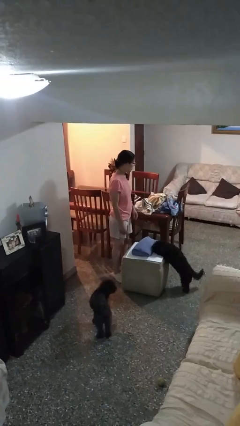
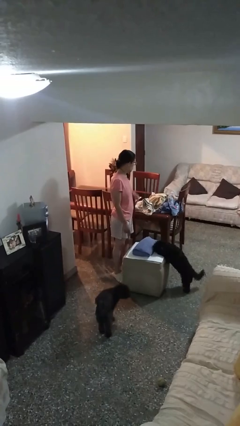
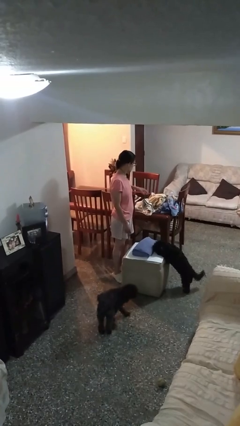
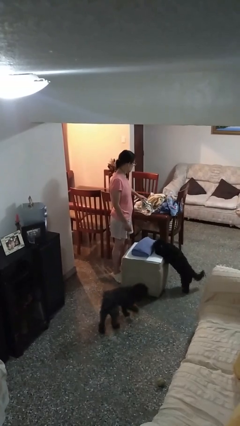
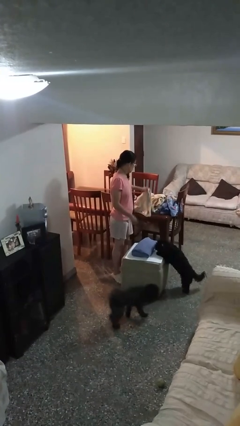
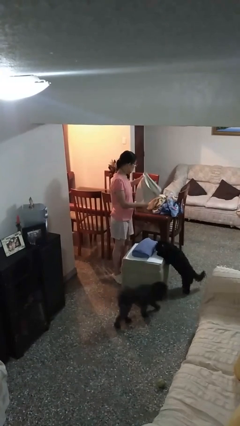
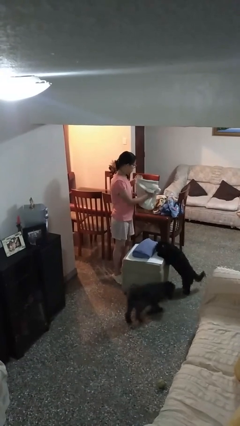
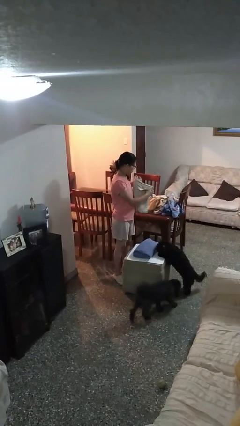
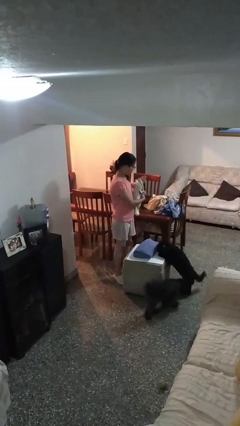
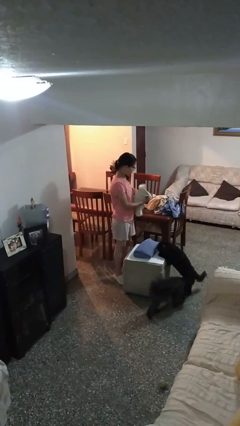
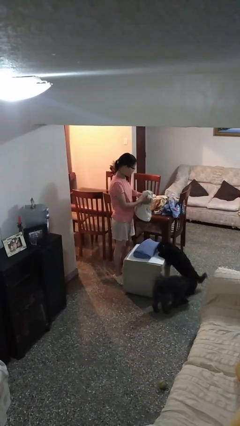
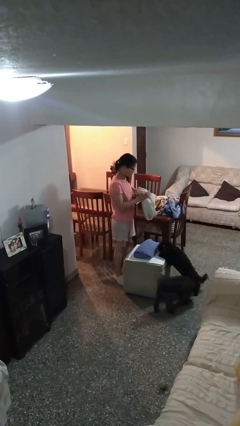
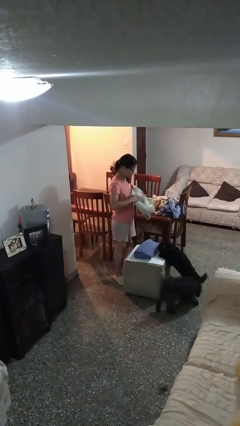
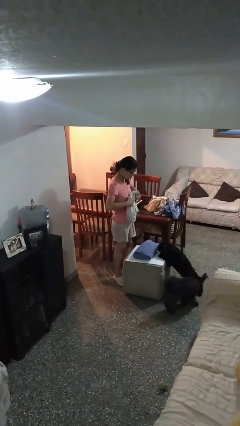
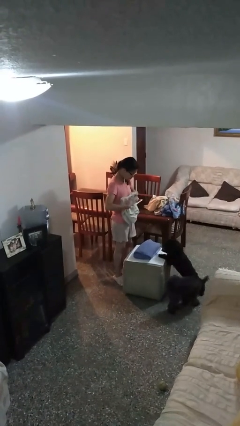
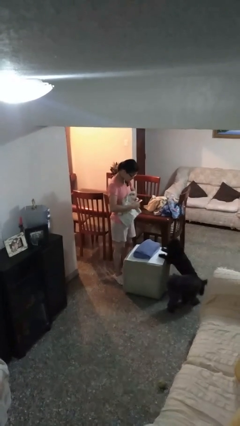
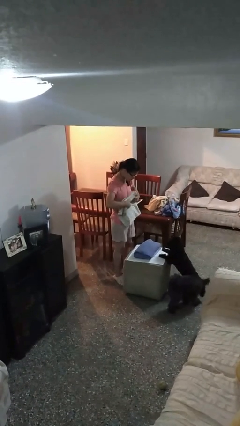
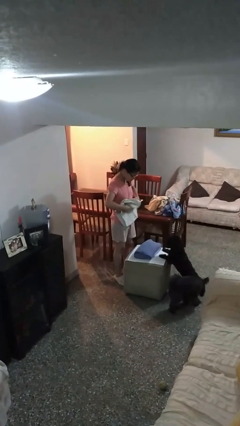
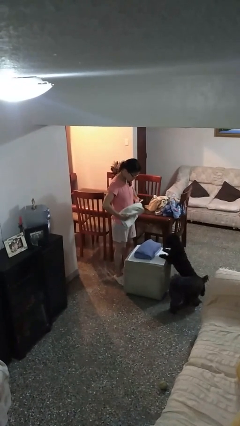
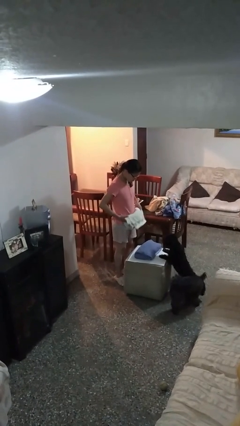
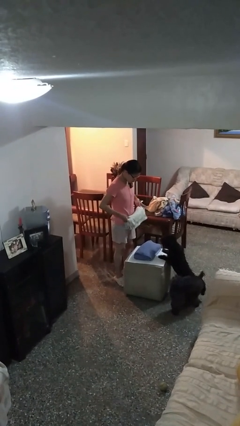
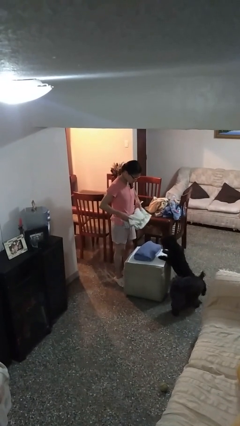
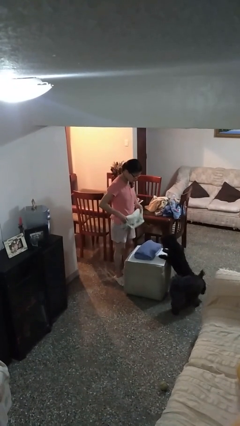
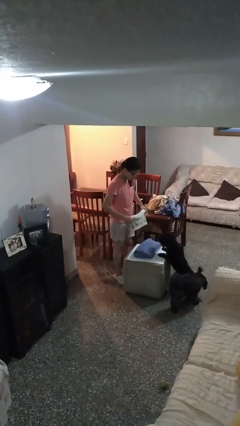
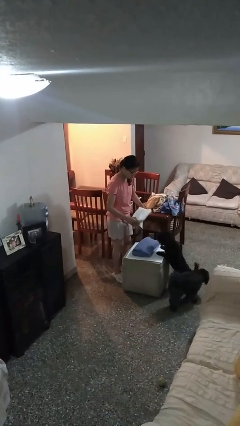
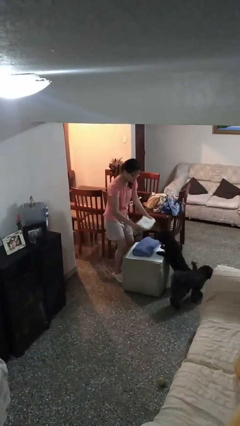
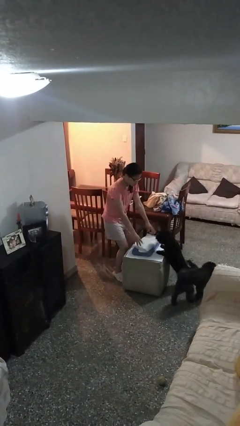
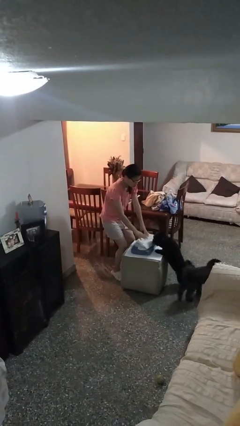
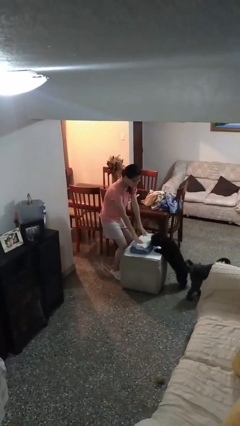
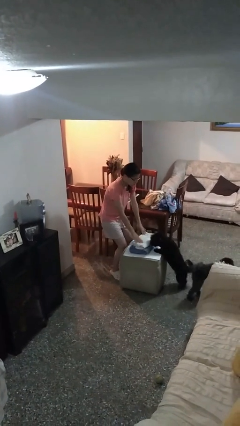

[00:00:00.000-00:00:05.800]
person folds towel

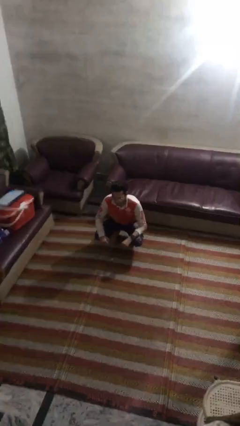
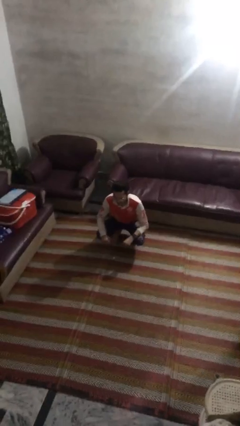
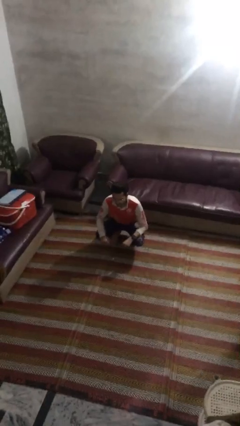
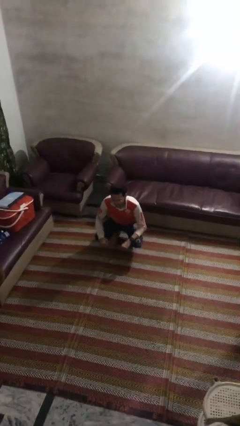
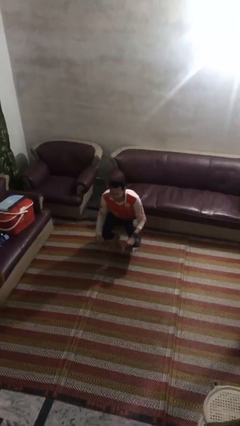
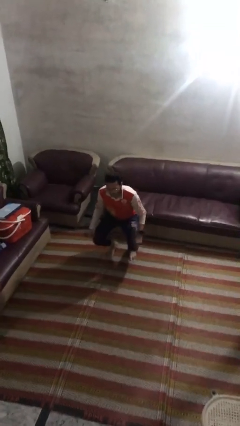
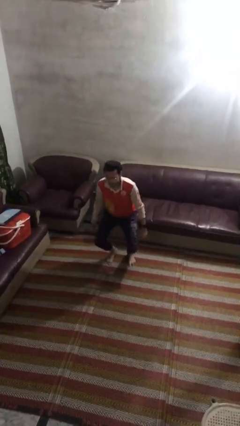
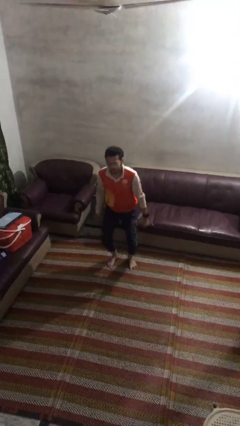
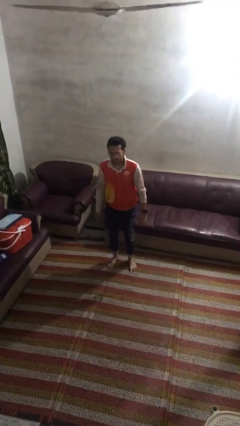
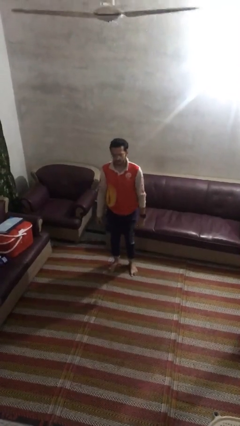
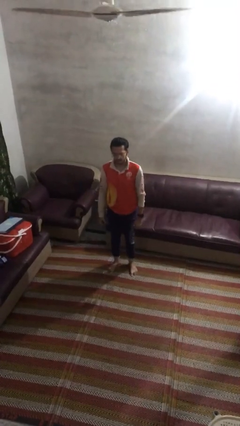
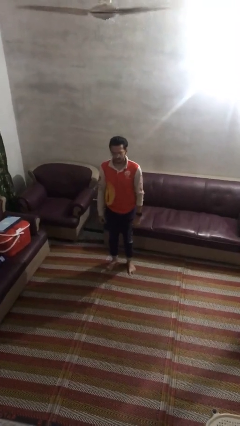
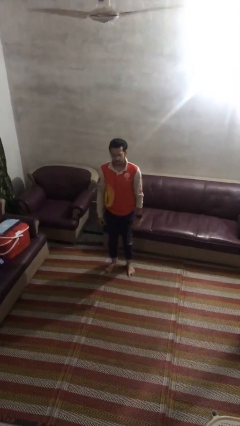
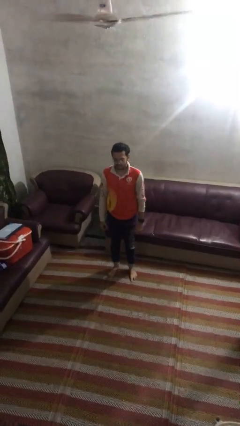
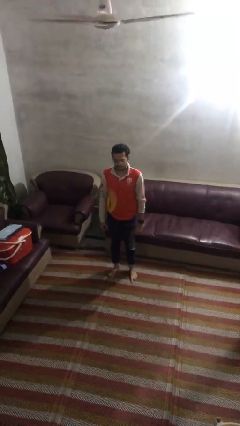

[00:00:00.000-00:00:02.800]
person stands up

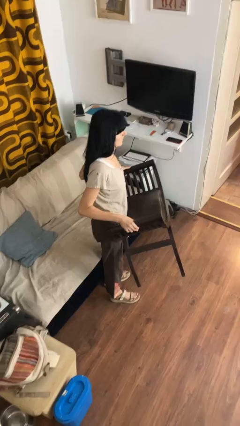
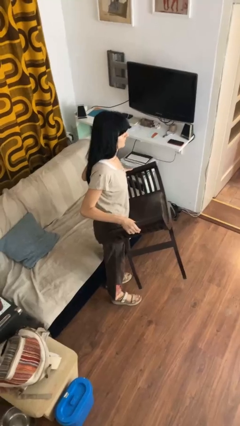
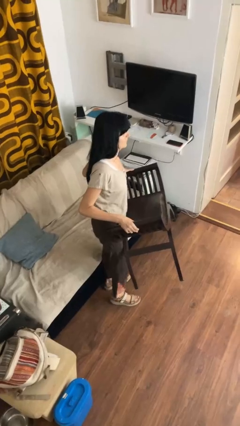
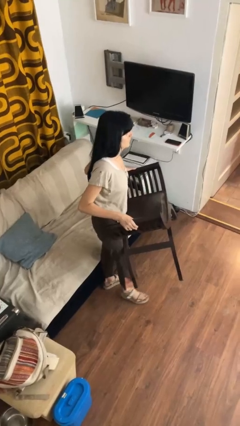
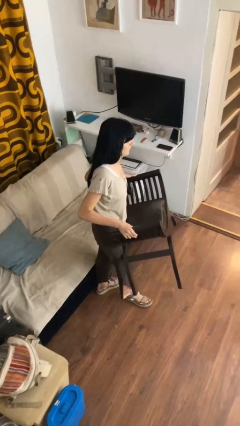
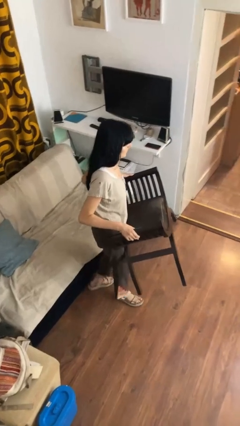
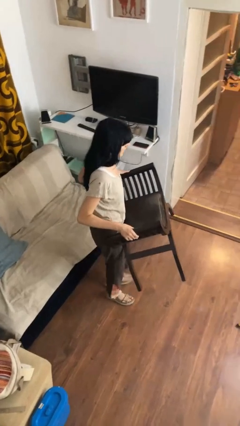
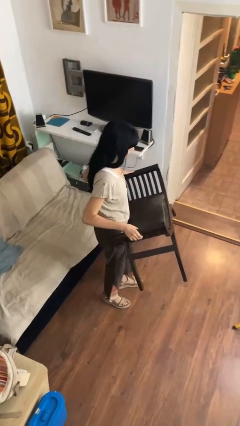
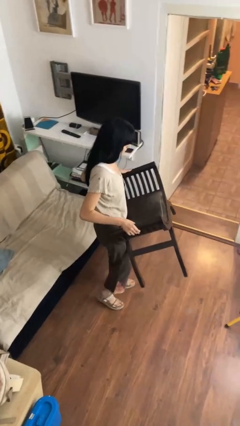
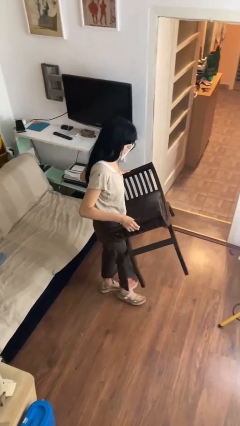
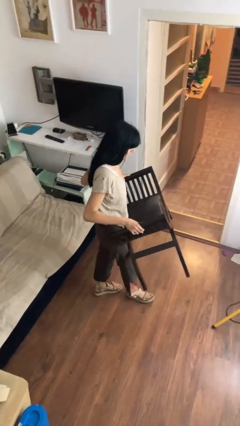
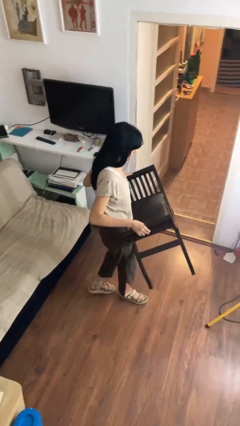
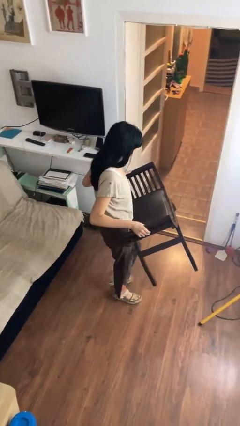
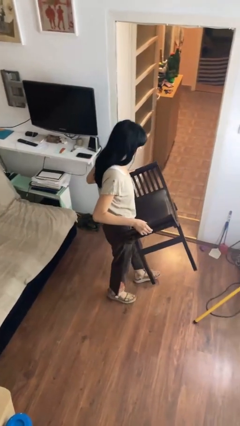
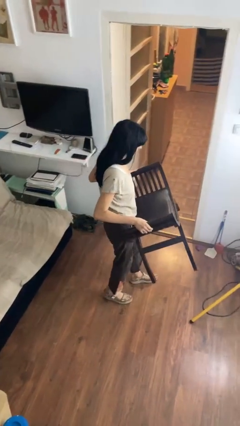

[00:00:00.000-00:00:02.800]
person carries furniture

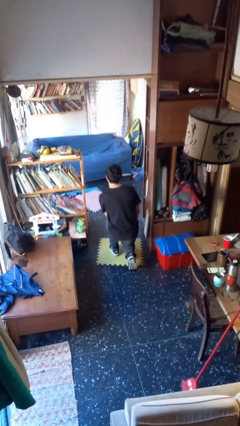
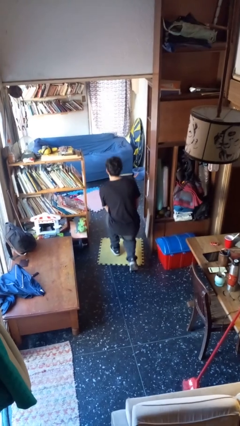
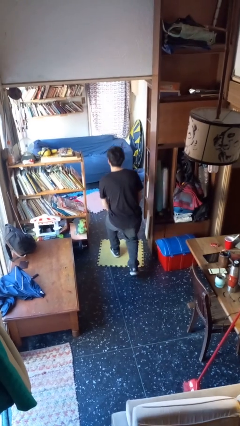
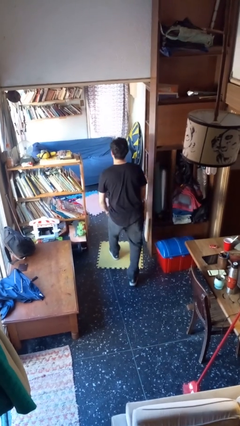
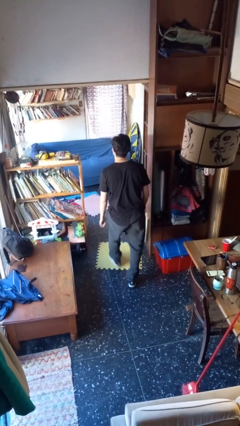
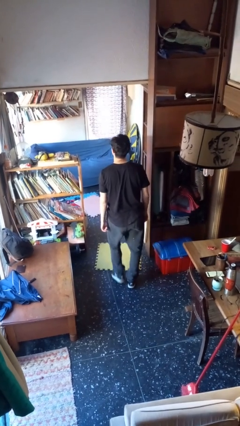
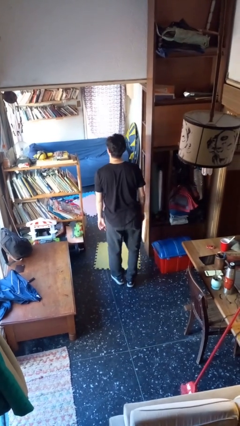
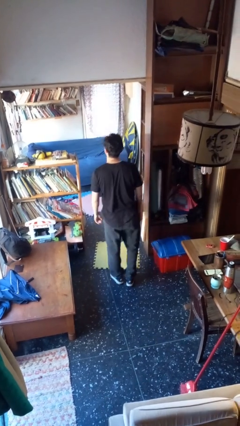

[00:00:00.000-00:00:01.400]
person stands up from floor

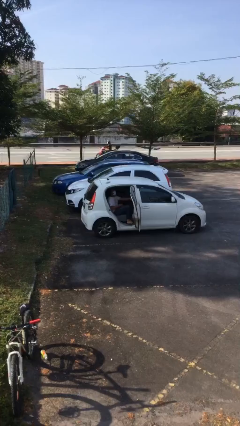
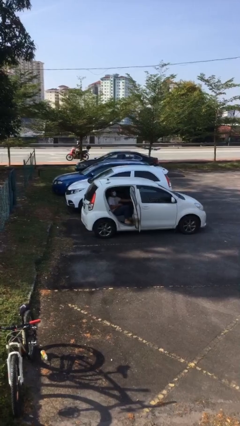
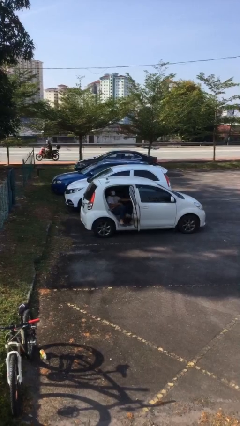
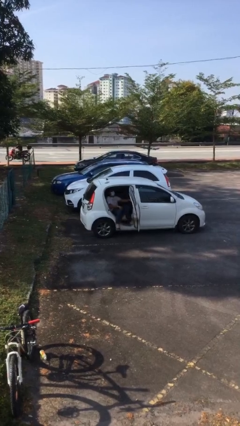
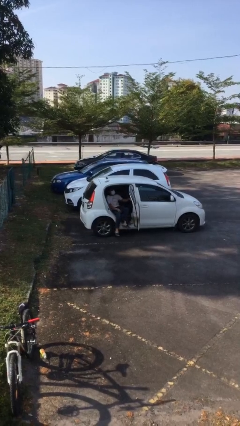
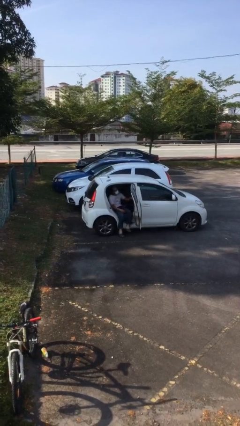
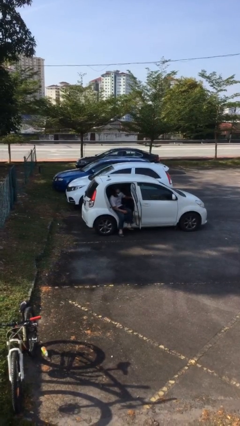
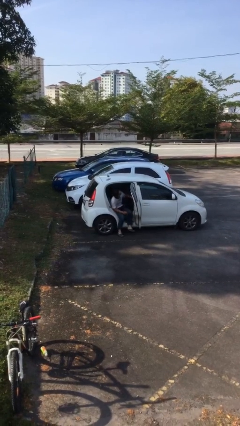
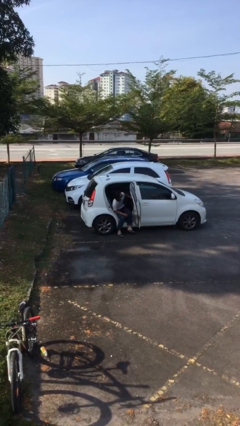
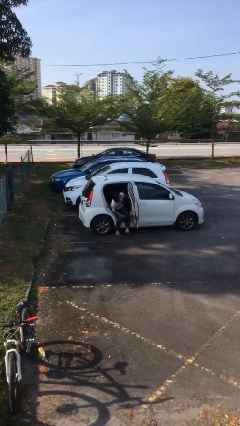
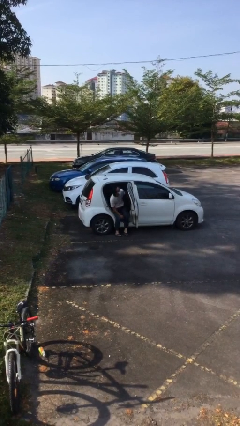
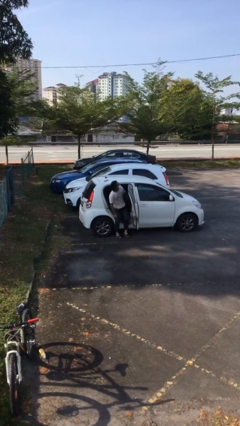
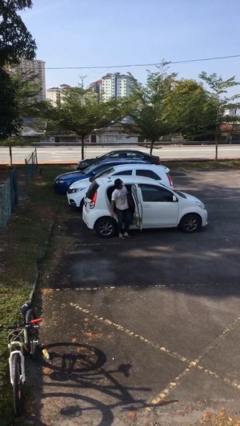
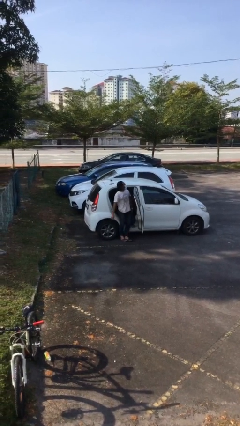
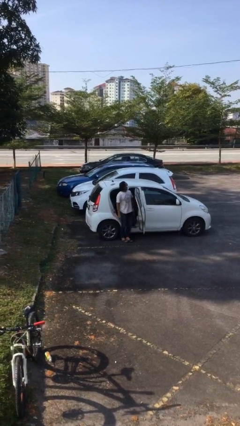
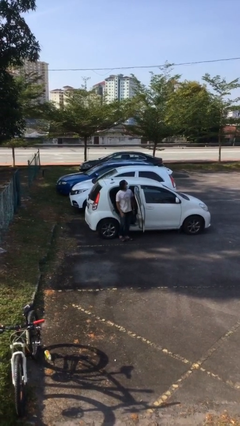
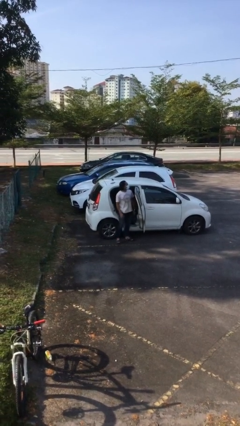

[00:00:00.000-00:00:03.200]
person exits car

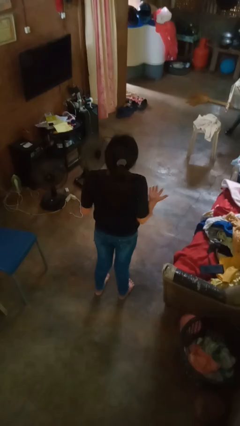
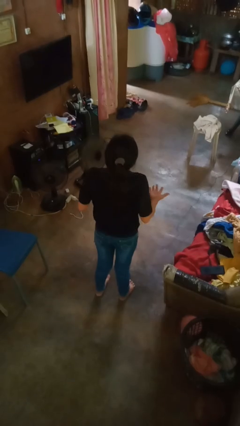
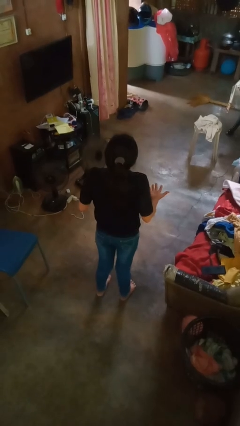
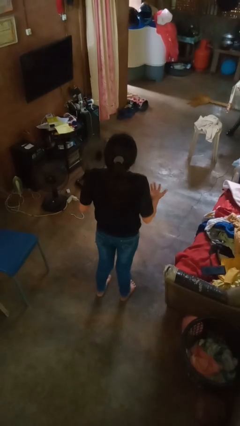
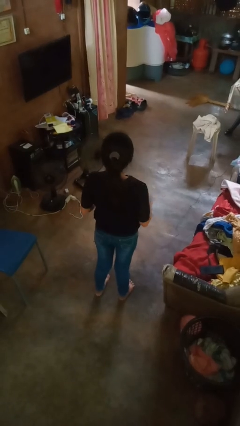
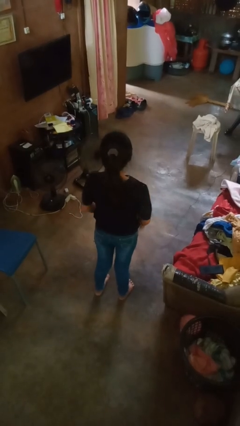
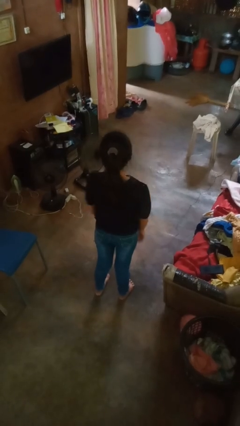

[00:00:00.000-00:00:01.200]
person shrugs

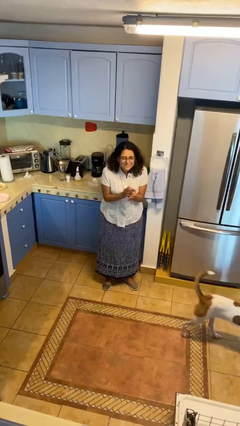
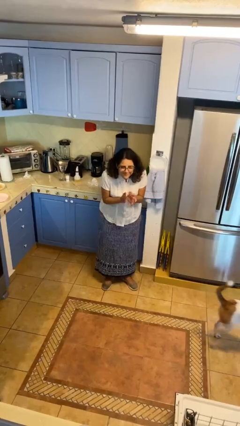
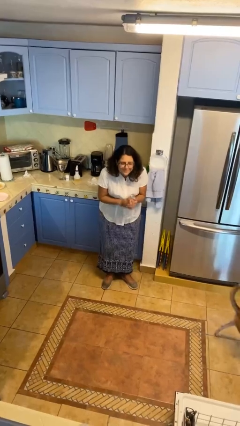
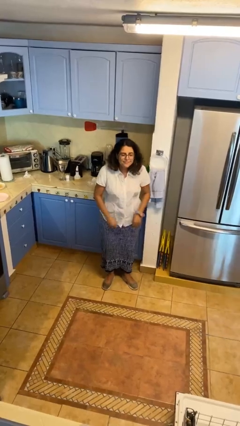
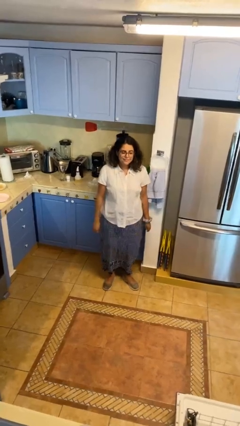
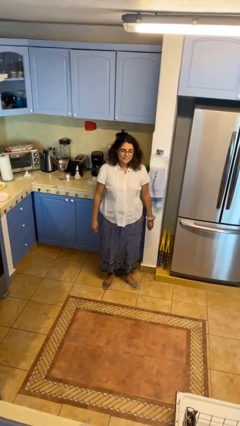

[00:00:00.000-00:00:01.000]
person claps hands
